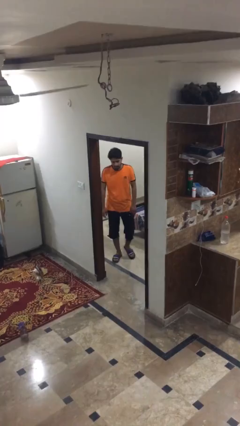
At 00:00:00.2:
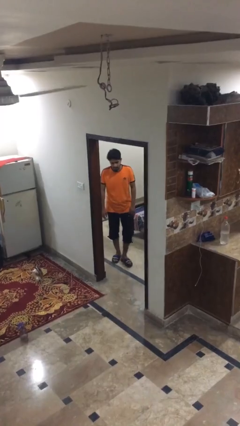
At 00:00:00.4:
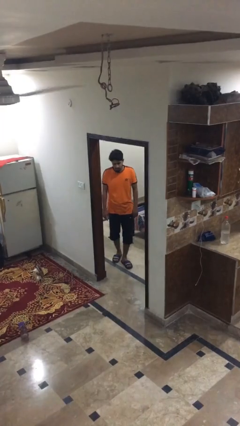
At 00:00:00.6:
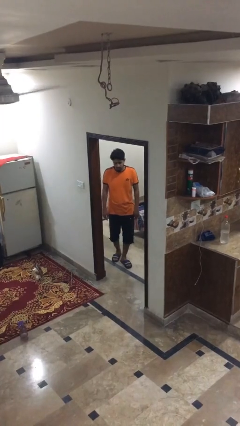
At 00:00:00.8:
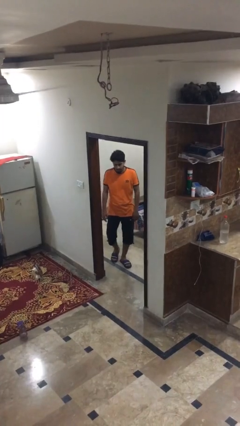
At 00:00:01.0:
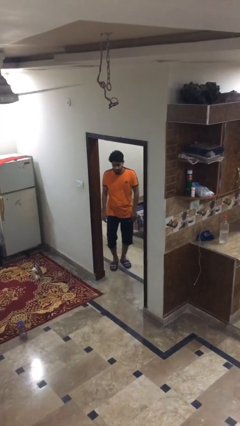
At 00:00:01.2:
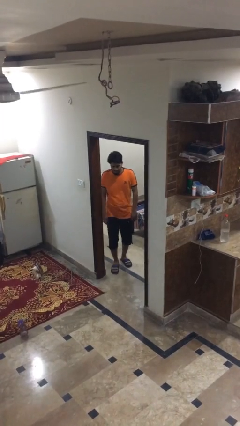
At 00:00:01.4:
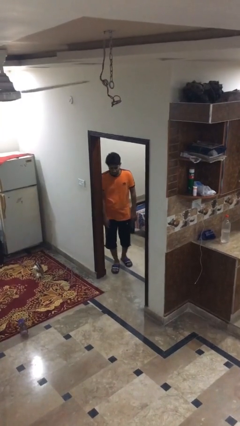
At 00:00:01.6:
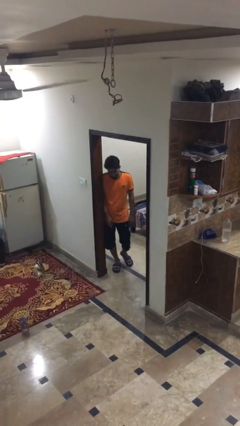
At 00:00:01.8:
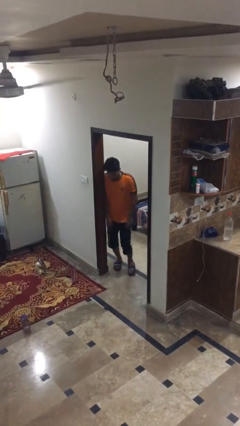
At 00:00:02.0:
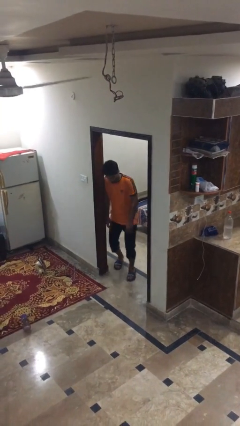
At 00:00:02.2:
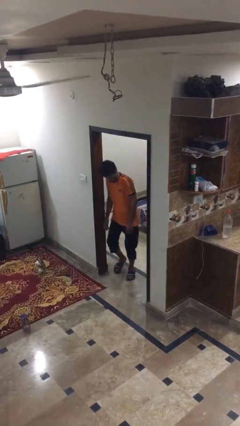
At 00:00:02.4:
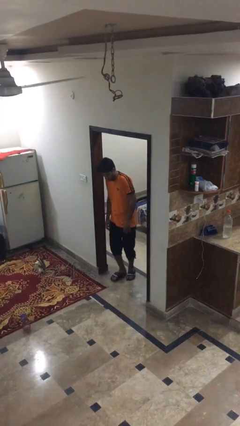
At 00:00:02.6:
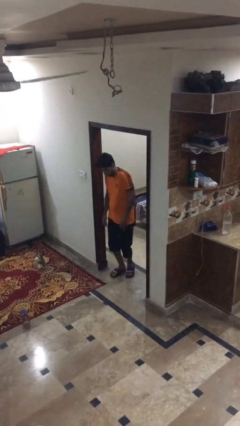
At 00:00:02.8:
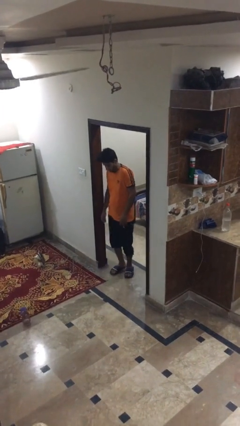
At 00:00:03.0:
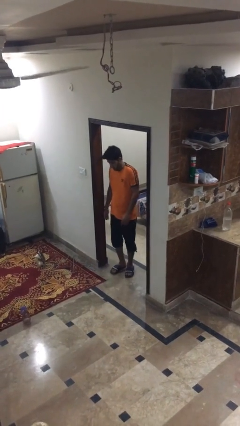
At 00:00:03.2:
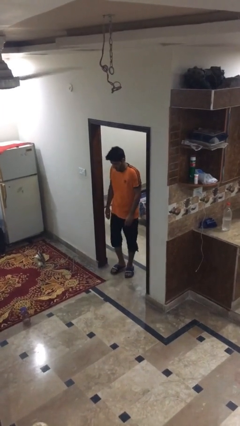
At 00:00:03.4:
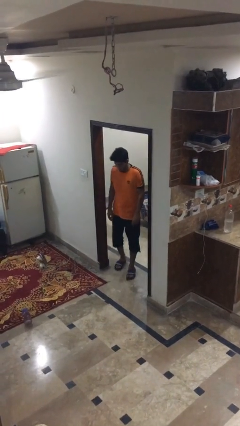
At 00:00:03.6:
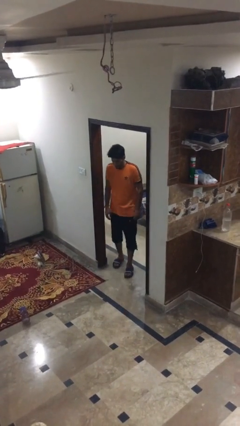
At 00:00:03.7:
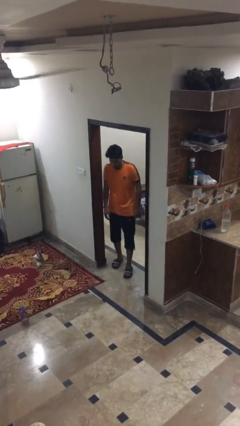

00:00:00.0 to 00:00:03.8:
person bumps into wall

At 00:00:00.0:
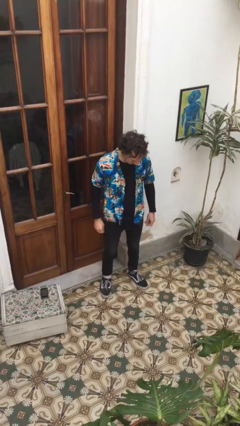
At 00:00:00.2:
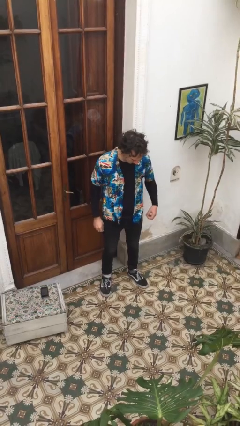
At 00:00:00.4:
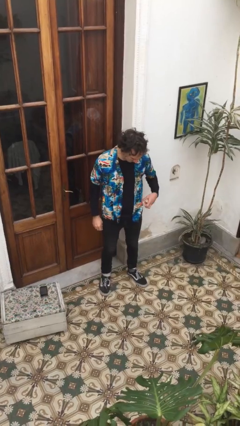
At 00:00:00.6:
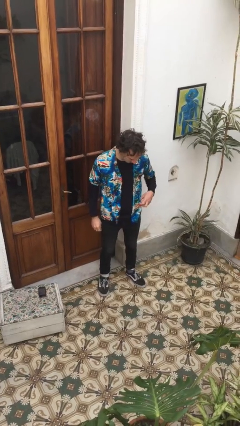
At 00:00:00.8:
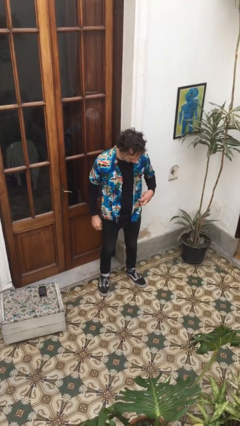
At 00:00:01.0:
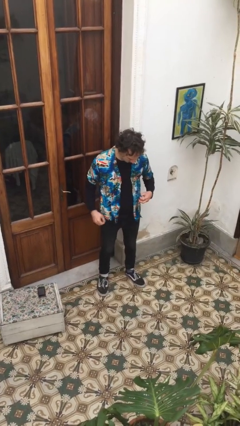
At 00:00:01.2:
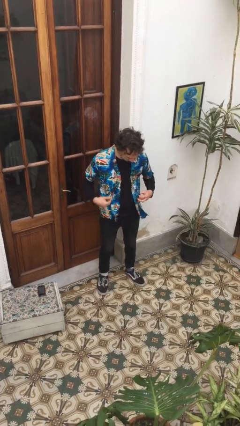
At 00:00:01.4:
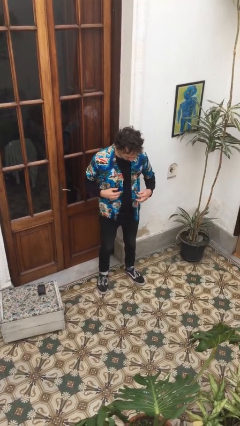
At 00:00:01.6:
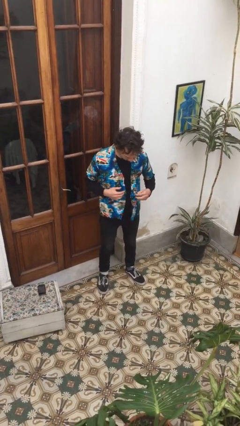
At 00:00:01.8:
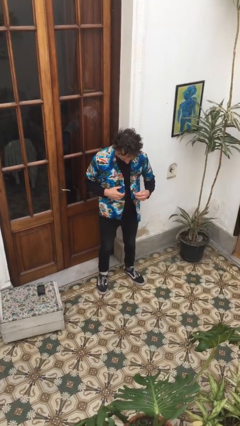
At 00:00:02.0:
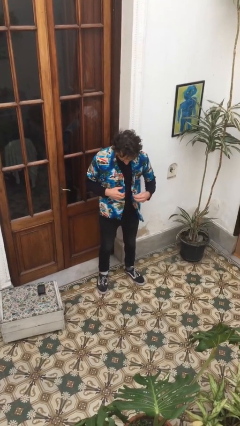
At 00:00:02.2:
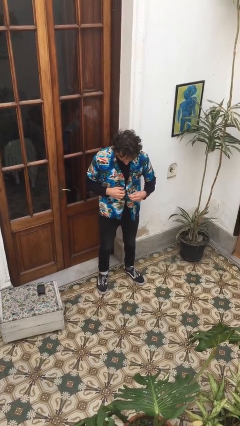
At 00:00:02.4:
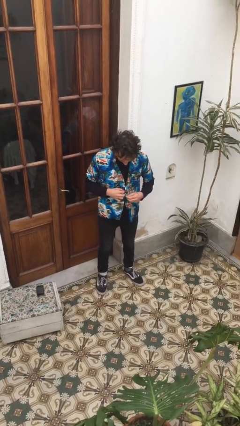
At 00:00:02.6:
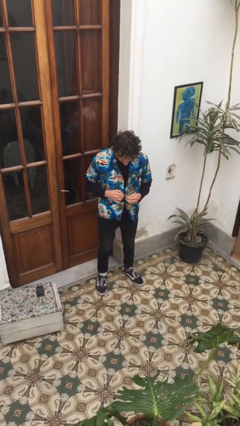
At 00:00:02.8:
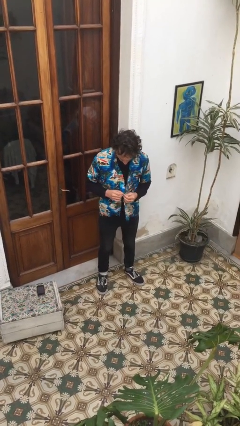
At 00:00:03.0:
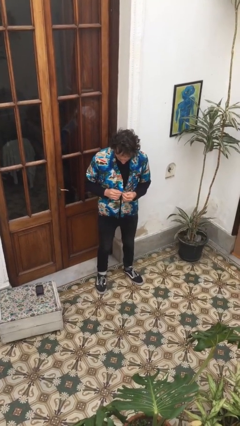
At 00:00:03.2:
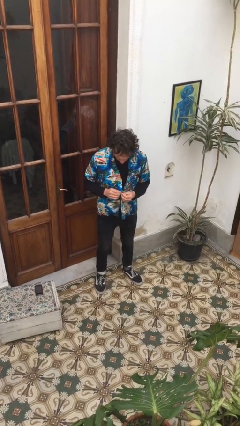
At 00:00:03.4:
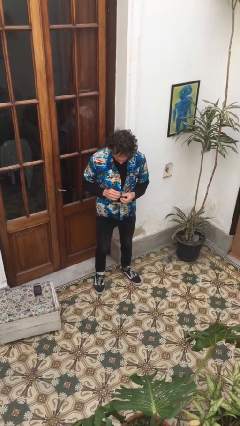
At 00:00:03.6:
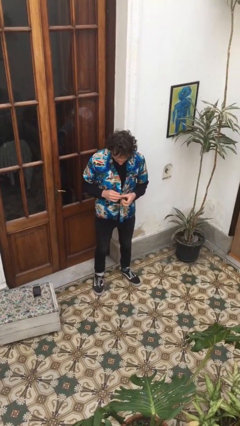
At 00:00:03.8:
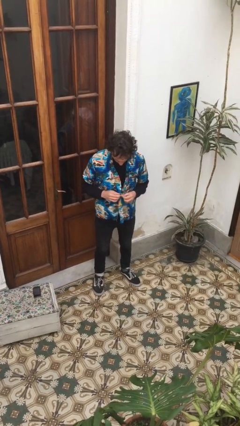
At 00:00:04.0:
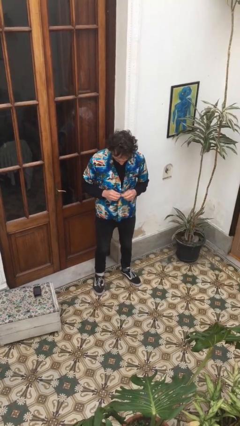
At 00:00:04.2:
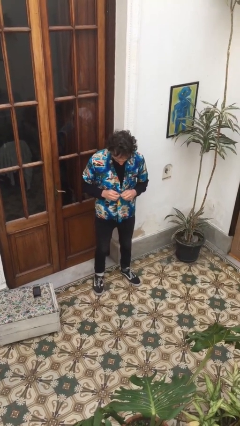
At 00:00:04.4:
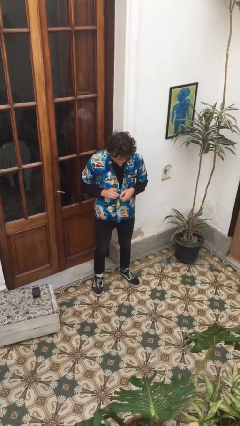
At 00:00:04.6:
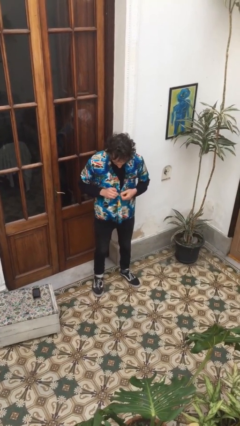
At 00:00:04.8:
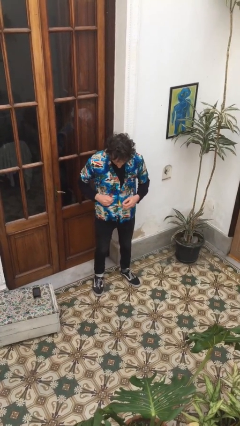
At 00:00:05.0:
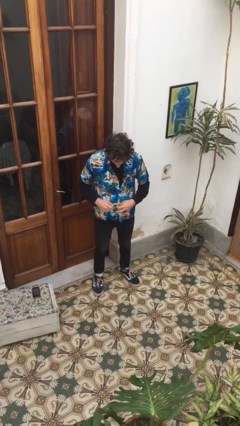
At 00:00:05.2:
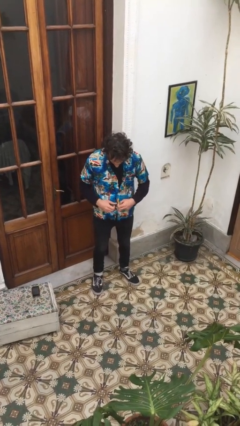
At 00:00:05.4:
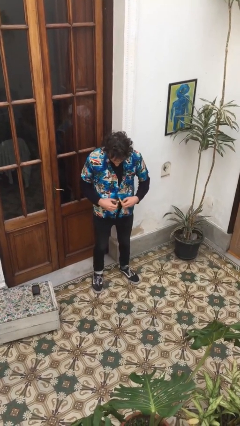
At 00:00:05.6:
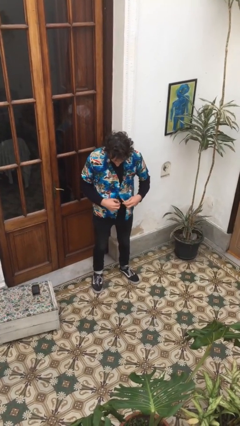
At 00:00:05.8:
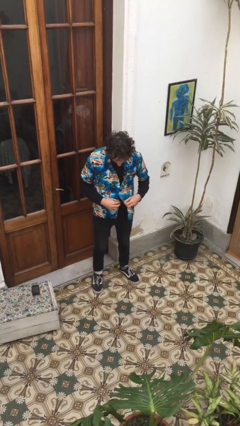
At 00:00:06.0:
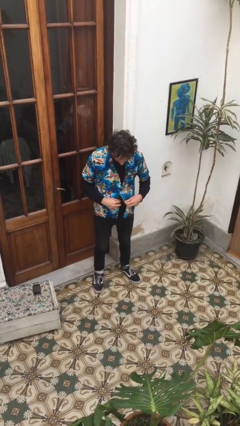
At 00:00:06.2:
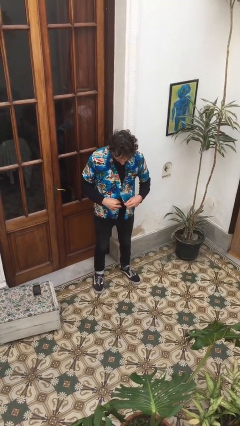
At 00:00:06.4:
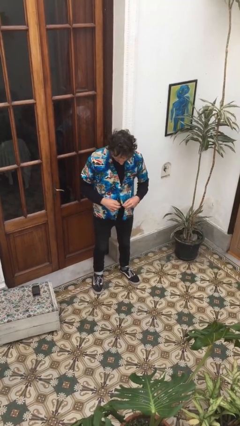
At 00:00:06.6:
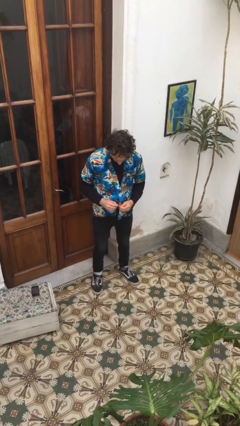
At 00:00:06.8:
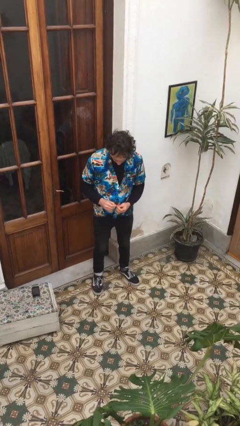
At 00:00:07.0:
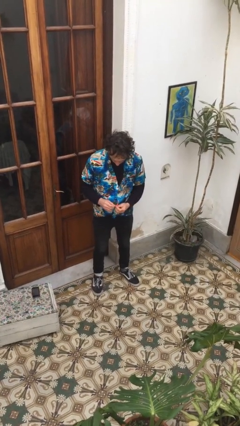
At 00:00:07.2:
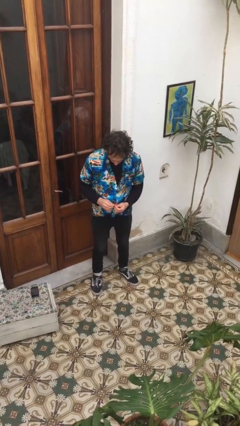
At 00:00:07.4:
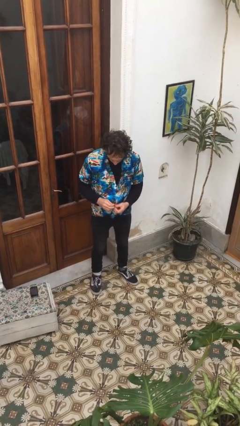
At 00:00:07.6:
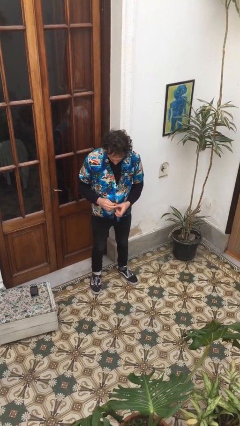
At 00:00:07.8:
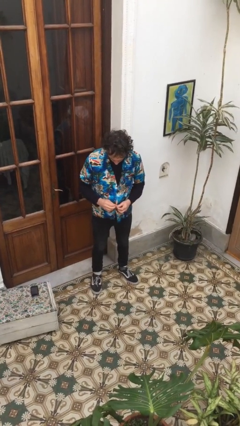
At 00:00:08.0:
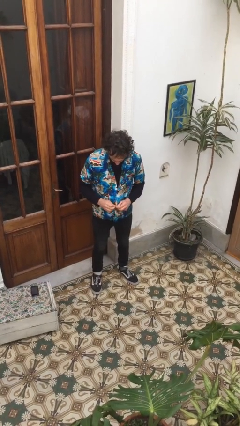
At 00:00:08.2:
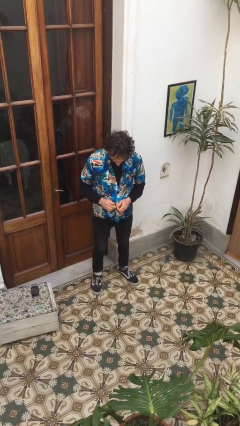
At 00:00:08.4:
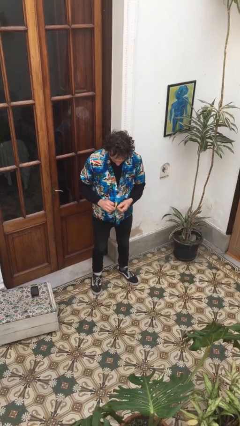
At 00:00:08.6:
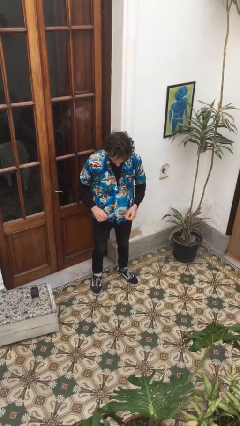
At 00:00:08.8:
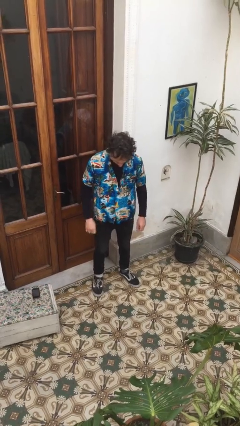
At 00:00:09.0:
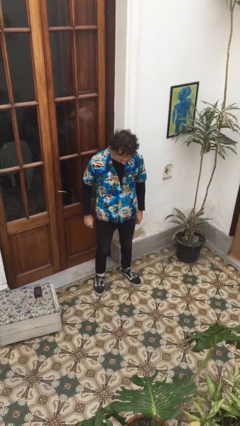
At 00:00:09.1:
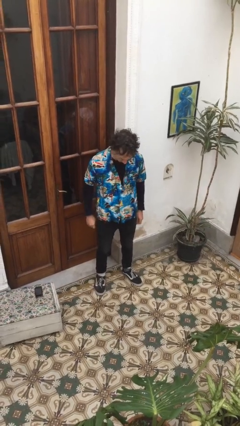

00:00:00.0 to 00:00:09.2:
person buttons shirt

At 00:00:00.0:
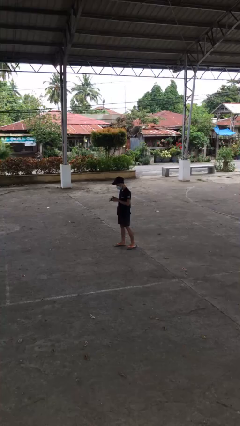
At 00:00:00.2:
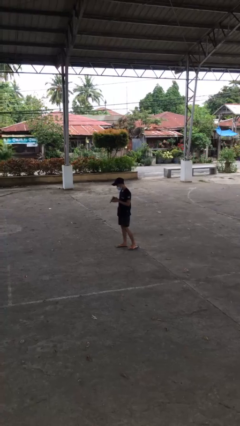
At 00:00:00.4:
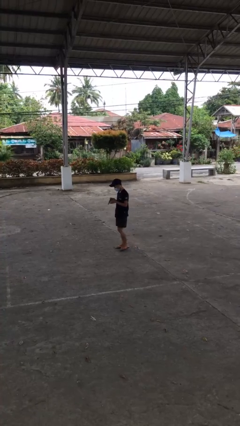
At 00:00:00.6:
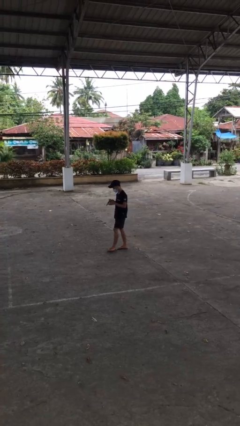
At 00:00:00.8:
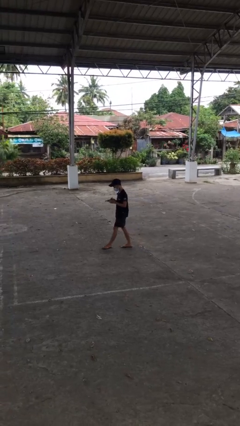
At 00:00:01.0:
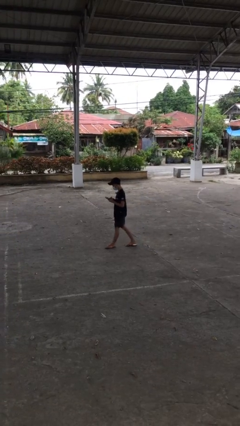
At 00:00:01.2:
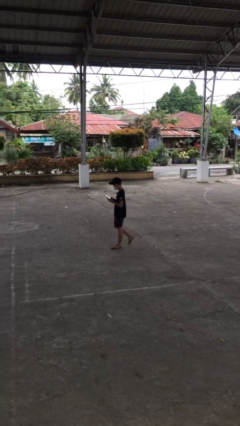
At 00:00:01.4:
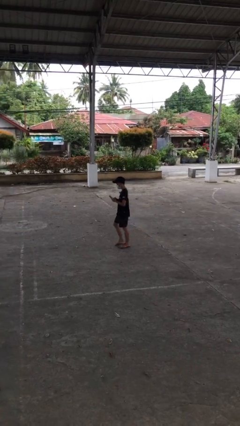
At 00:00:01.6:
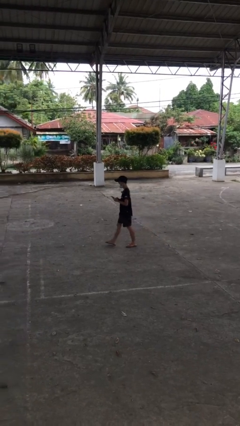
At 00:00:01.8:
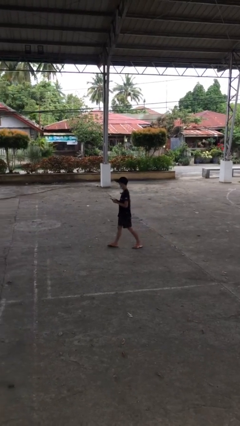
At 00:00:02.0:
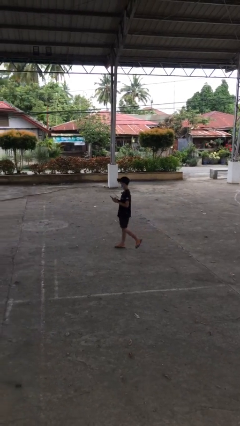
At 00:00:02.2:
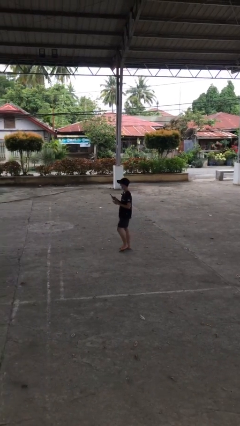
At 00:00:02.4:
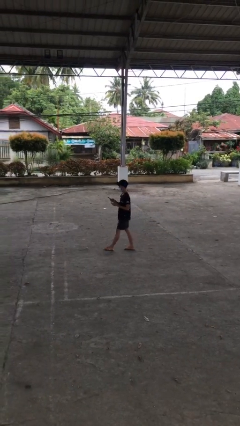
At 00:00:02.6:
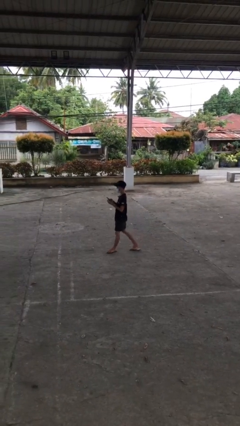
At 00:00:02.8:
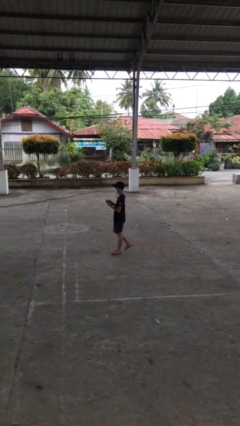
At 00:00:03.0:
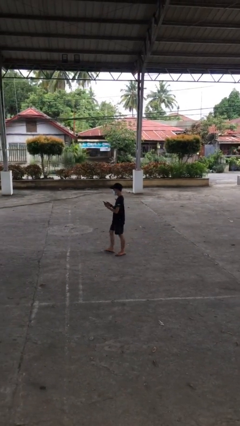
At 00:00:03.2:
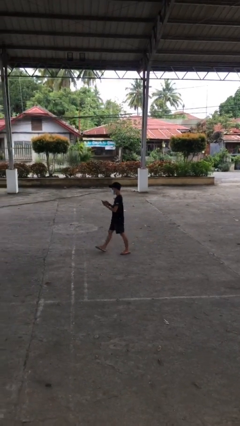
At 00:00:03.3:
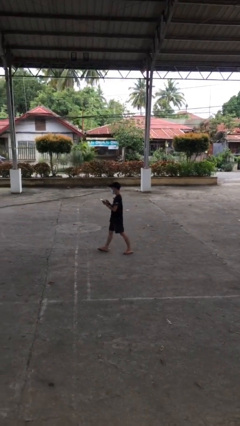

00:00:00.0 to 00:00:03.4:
person texts on phone

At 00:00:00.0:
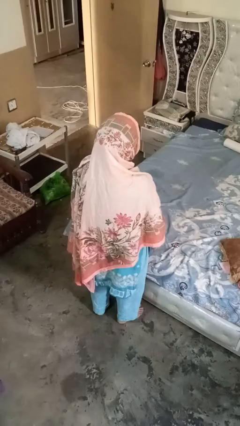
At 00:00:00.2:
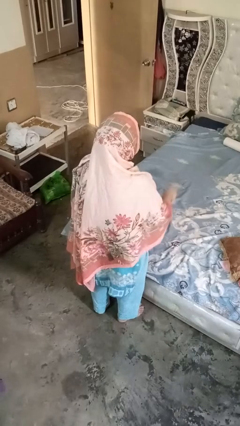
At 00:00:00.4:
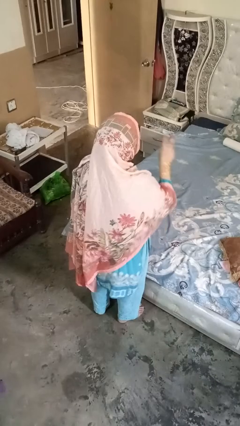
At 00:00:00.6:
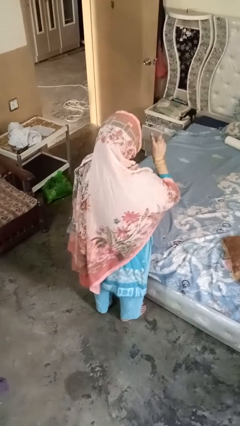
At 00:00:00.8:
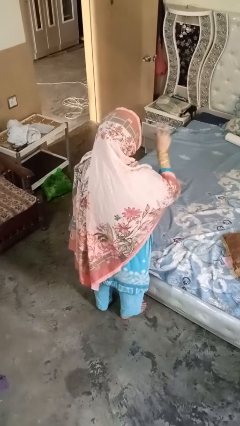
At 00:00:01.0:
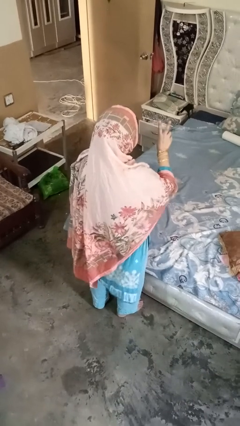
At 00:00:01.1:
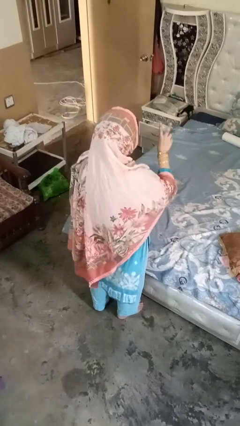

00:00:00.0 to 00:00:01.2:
person gestures be quiet
